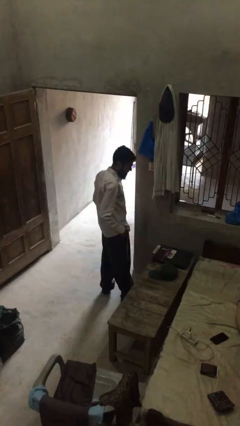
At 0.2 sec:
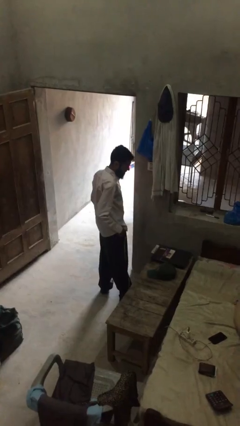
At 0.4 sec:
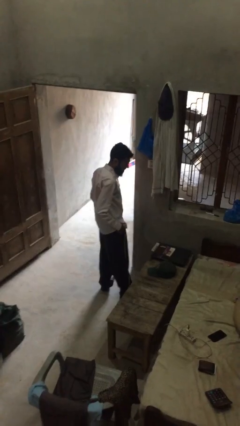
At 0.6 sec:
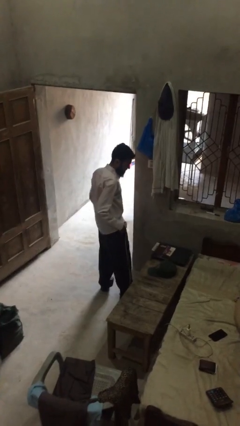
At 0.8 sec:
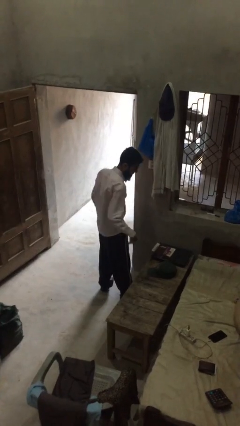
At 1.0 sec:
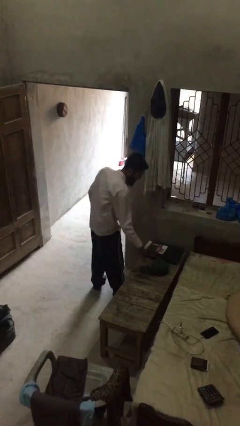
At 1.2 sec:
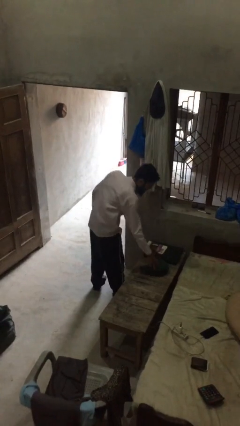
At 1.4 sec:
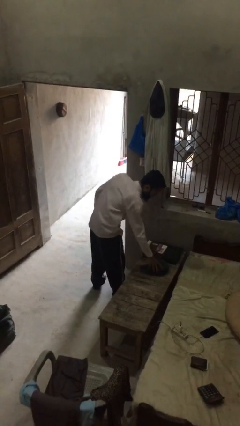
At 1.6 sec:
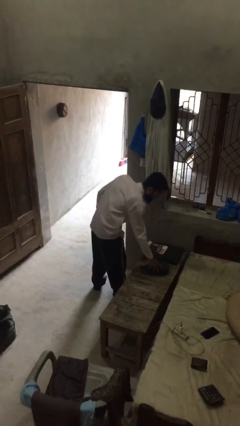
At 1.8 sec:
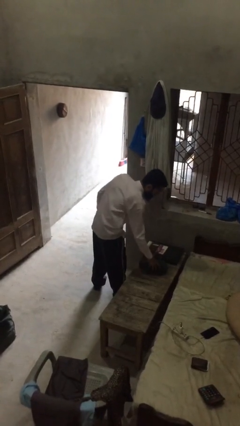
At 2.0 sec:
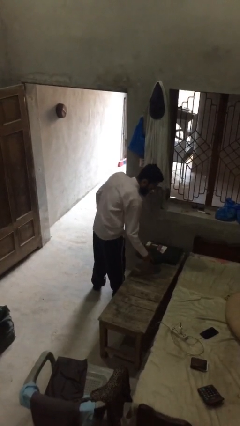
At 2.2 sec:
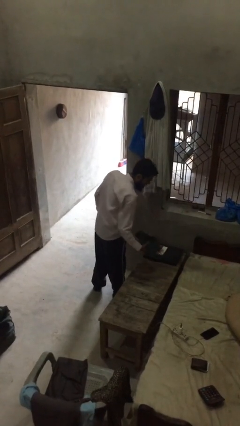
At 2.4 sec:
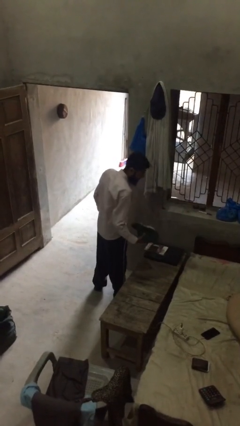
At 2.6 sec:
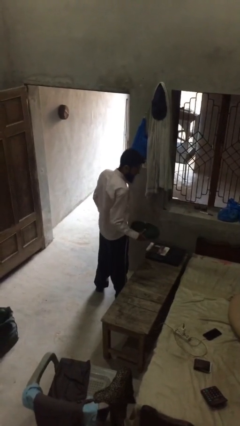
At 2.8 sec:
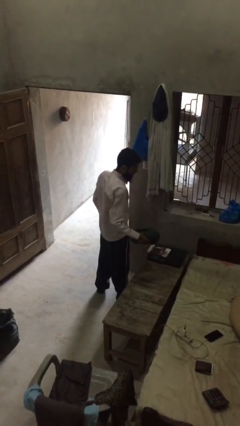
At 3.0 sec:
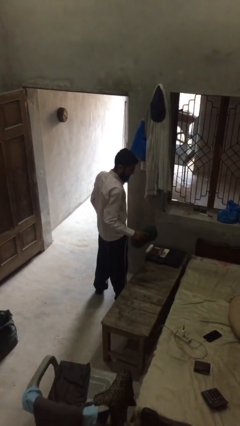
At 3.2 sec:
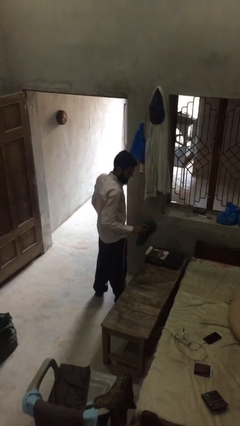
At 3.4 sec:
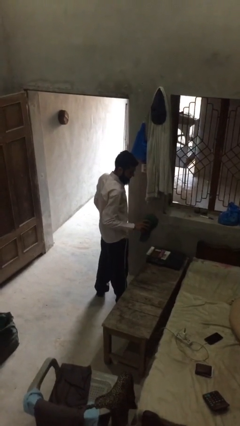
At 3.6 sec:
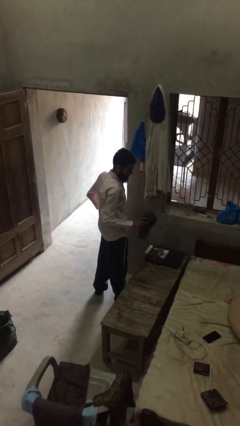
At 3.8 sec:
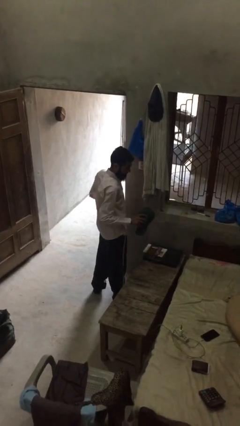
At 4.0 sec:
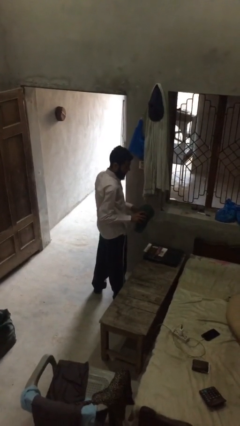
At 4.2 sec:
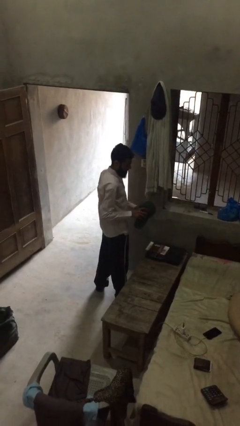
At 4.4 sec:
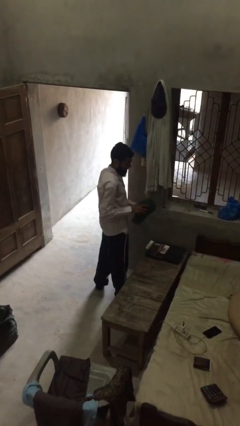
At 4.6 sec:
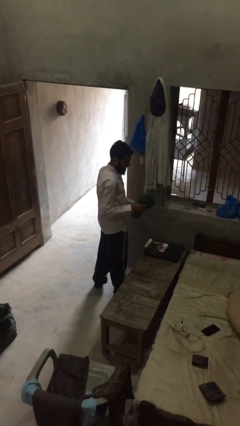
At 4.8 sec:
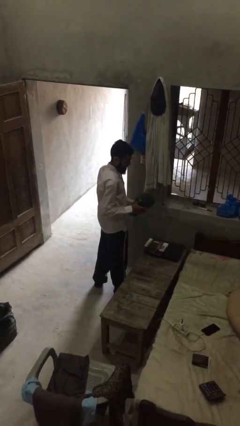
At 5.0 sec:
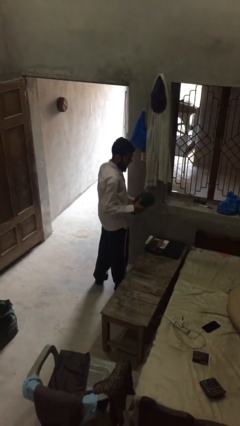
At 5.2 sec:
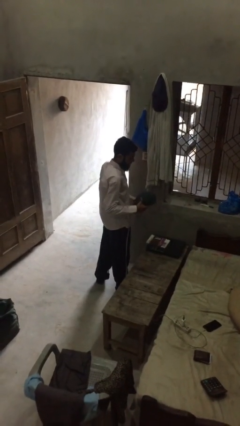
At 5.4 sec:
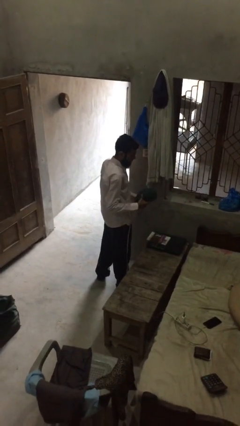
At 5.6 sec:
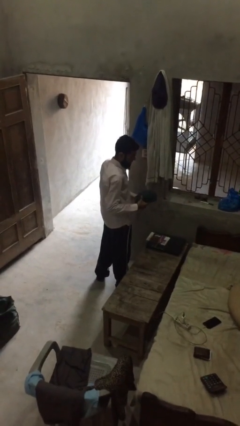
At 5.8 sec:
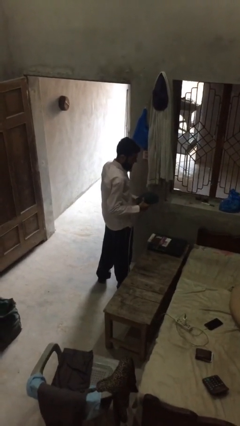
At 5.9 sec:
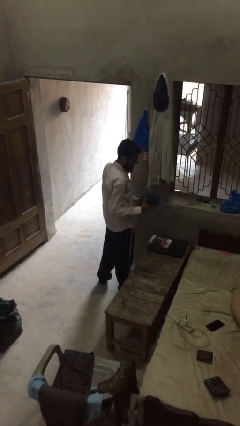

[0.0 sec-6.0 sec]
person picks up object from table

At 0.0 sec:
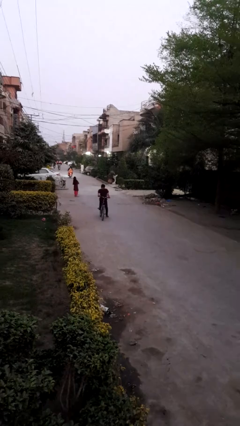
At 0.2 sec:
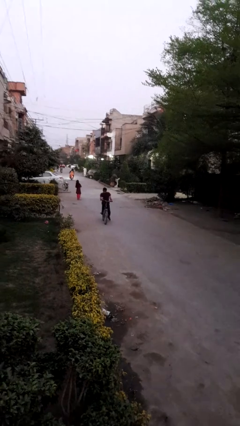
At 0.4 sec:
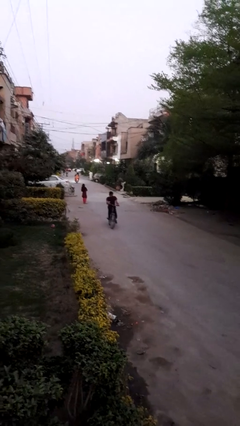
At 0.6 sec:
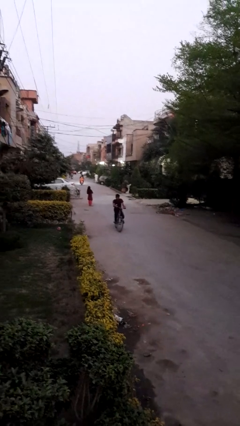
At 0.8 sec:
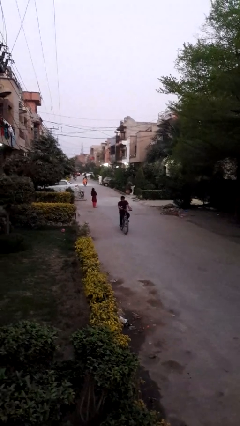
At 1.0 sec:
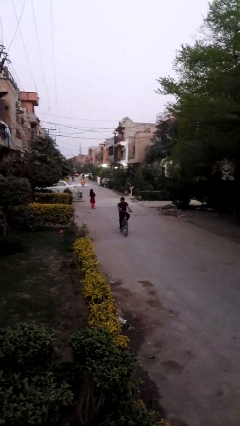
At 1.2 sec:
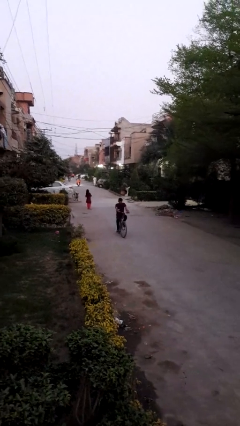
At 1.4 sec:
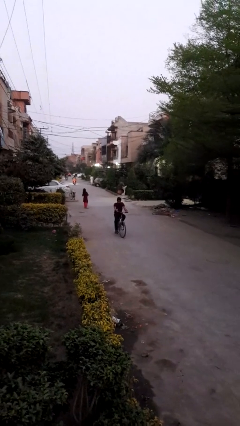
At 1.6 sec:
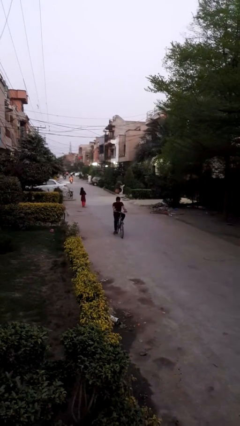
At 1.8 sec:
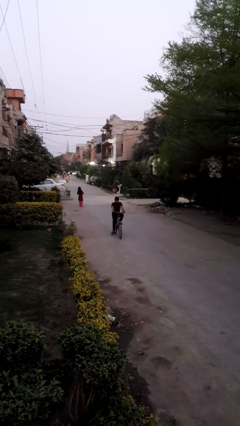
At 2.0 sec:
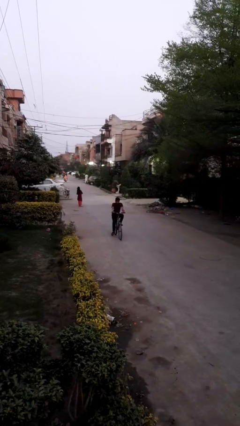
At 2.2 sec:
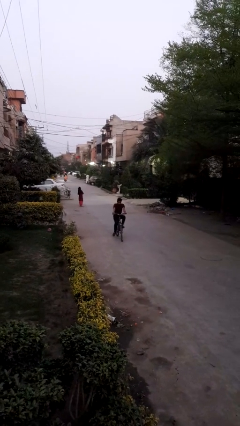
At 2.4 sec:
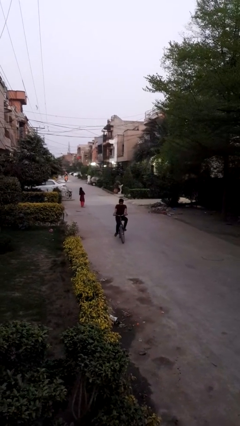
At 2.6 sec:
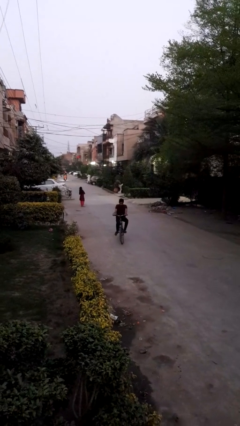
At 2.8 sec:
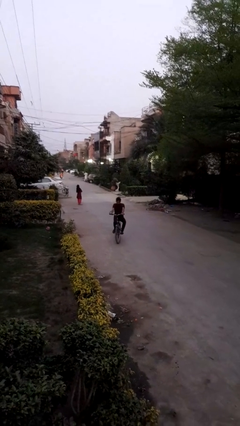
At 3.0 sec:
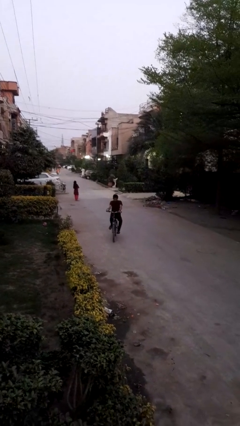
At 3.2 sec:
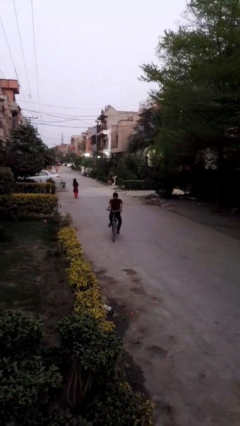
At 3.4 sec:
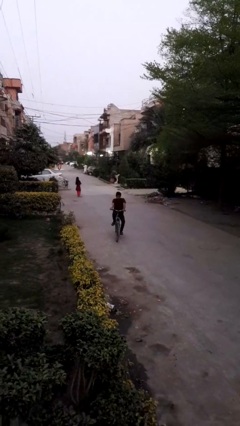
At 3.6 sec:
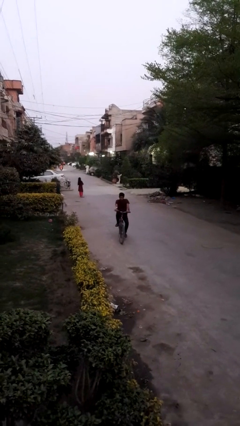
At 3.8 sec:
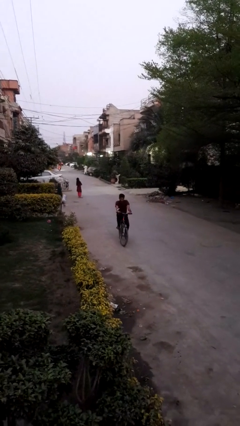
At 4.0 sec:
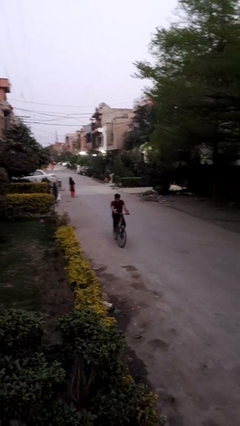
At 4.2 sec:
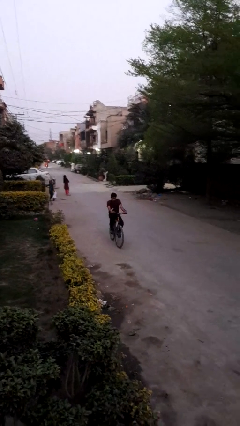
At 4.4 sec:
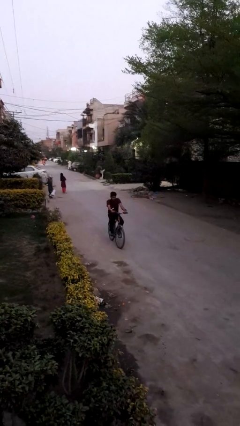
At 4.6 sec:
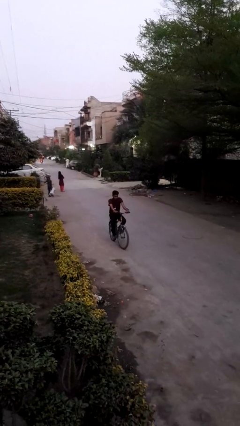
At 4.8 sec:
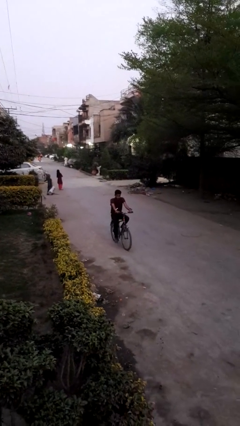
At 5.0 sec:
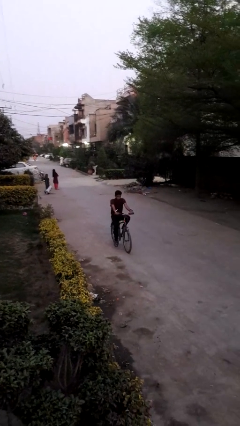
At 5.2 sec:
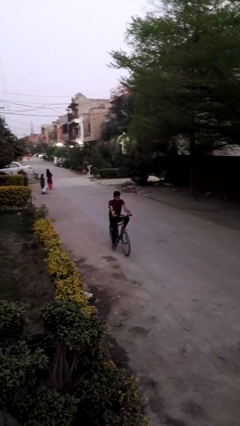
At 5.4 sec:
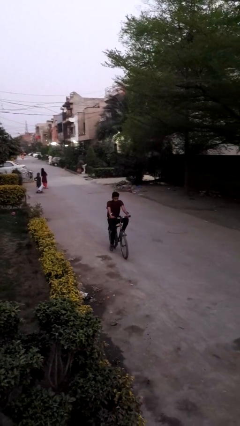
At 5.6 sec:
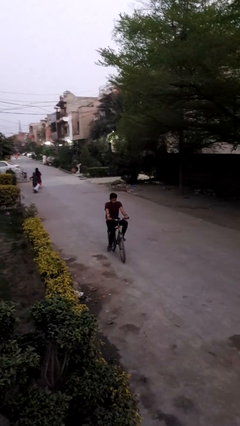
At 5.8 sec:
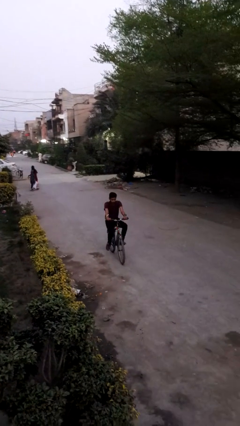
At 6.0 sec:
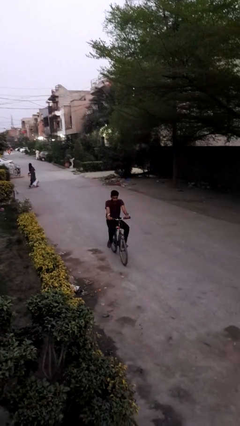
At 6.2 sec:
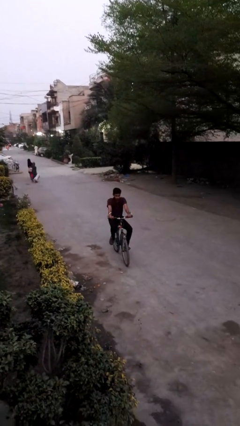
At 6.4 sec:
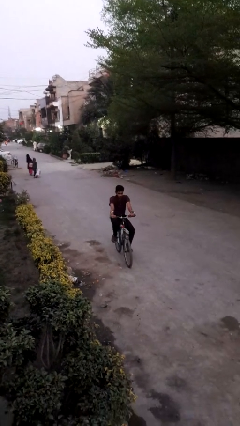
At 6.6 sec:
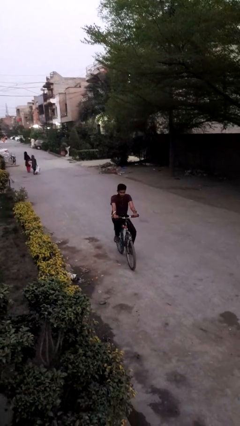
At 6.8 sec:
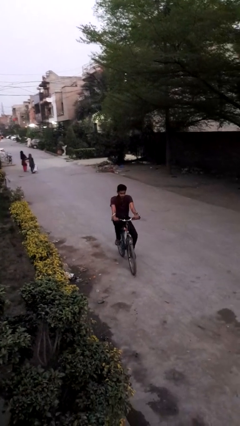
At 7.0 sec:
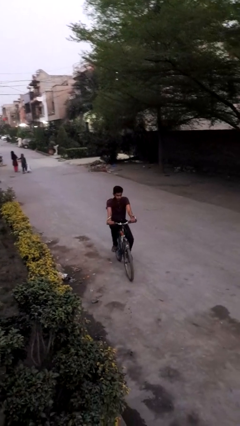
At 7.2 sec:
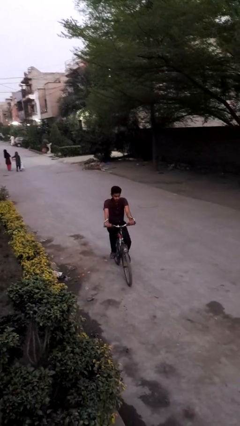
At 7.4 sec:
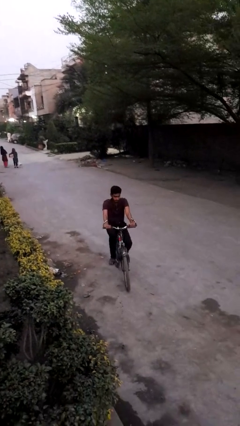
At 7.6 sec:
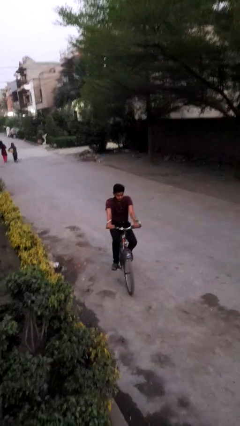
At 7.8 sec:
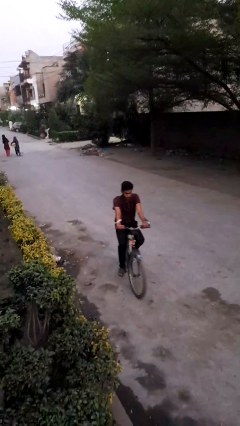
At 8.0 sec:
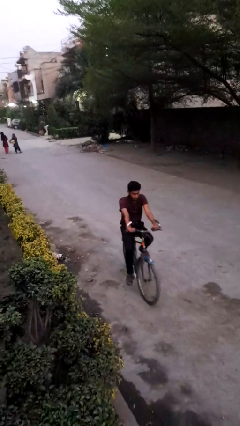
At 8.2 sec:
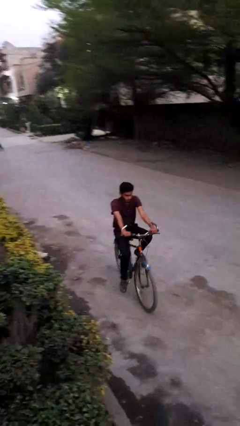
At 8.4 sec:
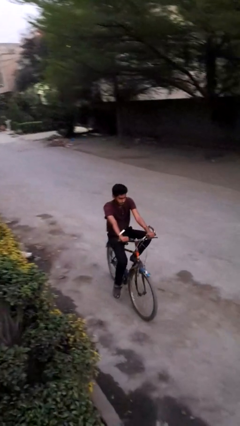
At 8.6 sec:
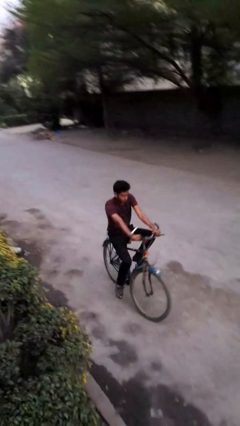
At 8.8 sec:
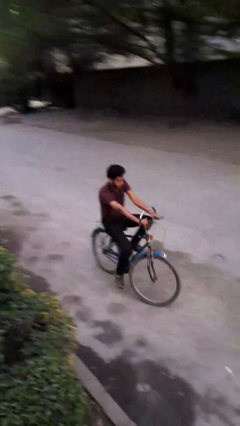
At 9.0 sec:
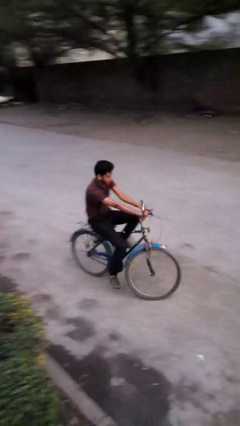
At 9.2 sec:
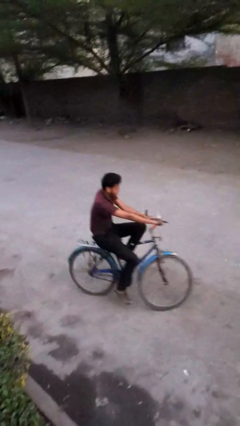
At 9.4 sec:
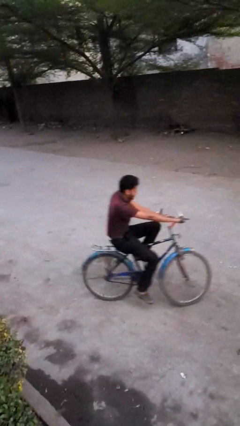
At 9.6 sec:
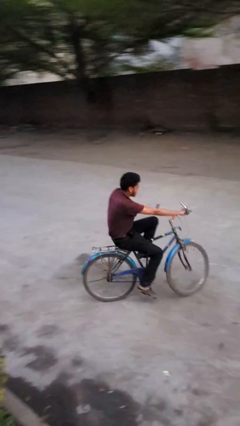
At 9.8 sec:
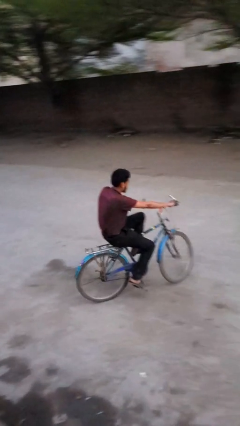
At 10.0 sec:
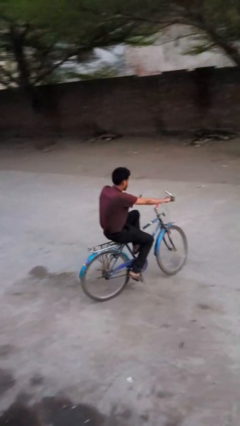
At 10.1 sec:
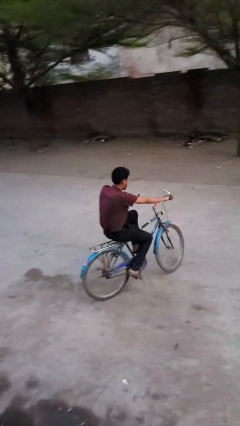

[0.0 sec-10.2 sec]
person rides bicycle

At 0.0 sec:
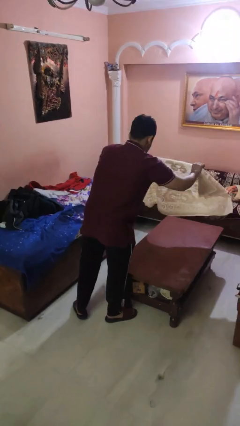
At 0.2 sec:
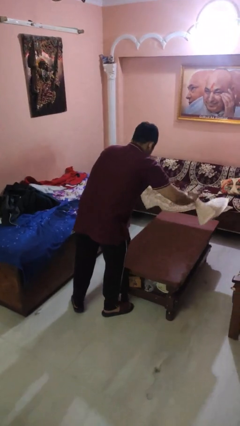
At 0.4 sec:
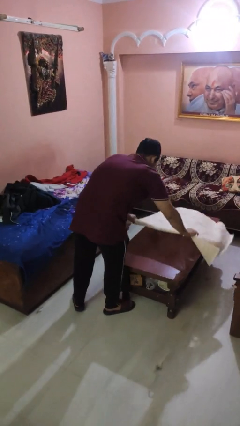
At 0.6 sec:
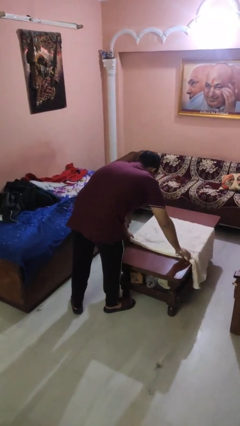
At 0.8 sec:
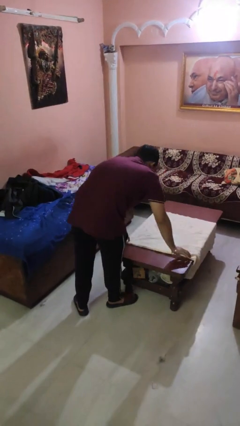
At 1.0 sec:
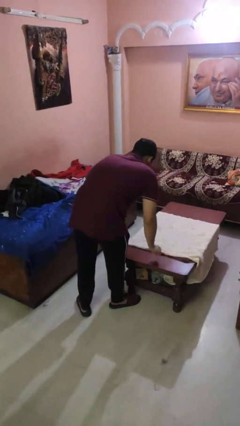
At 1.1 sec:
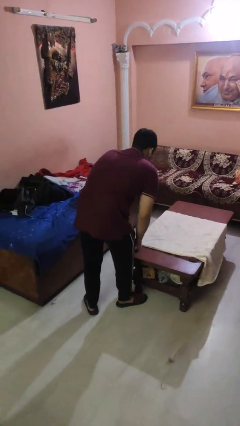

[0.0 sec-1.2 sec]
person spreads tablecloth

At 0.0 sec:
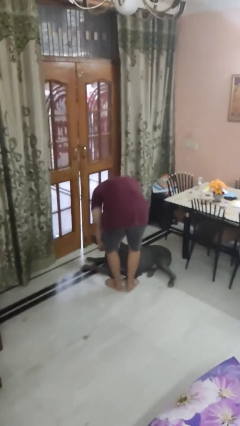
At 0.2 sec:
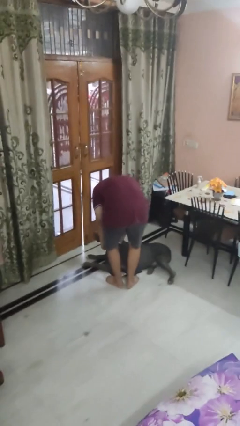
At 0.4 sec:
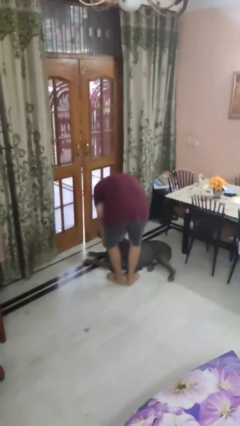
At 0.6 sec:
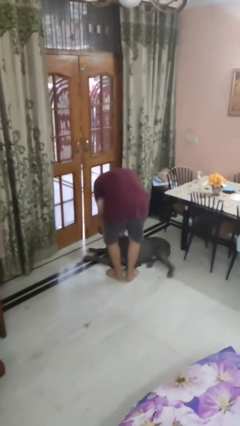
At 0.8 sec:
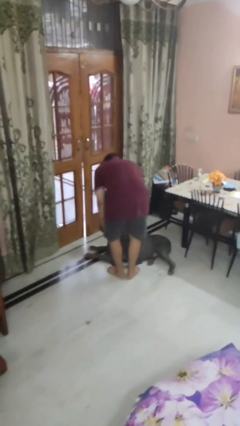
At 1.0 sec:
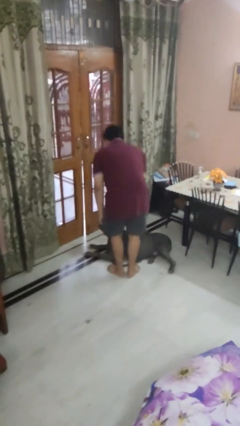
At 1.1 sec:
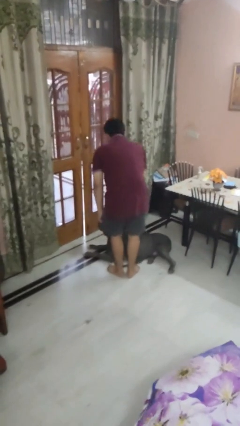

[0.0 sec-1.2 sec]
person attaches leash to dog
